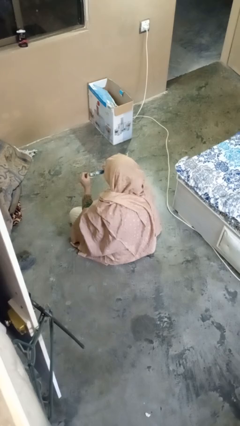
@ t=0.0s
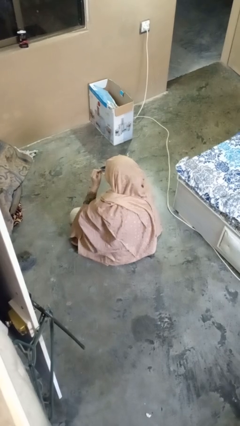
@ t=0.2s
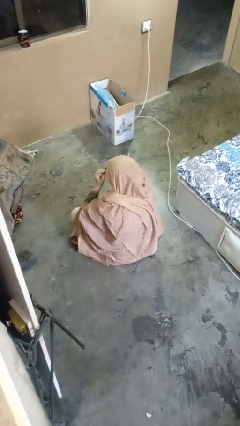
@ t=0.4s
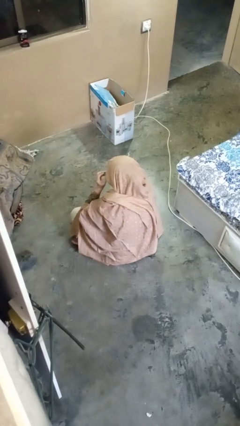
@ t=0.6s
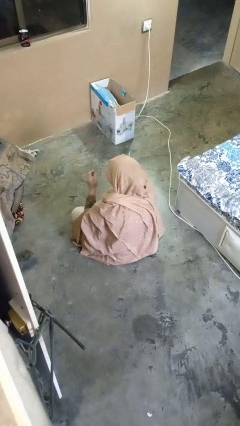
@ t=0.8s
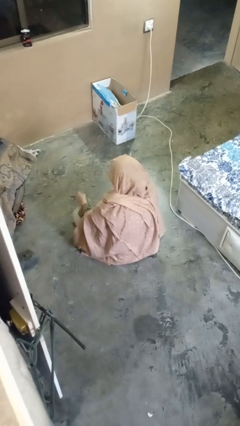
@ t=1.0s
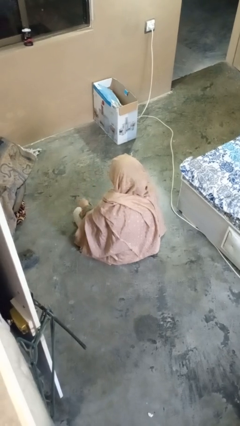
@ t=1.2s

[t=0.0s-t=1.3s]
person puts on glasses

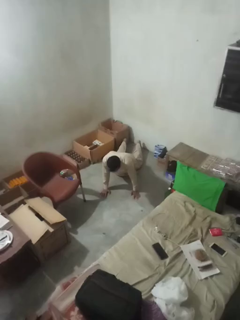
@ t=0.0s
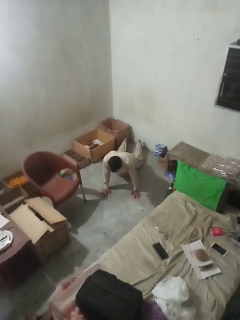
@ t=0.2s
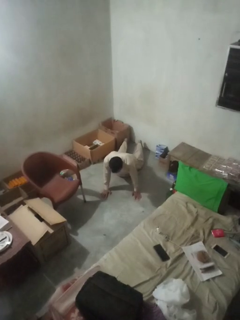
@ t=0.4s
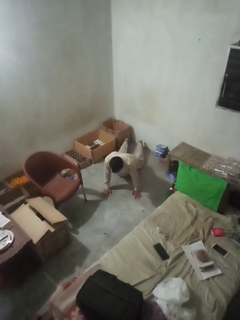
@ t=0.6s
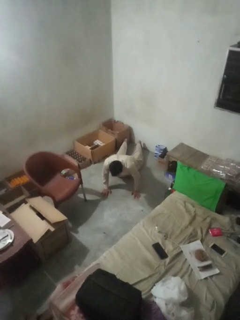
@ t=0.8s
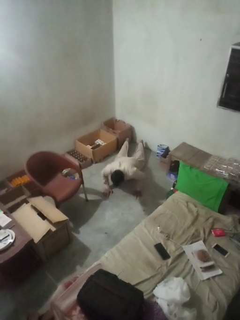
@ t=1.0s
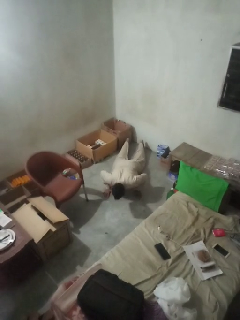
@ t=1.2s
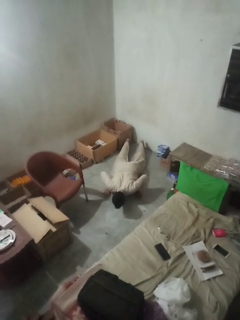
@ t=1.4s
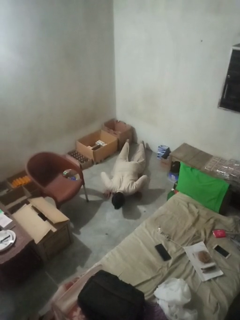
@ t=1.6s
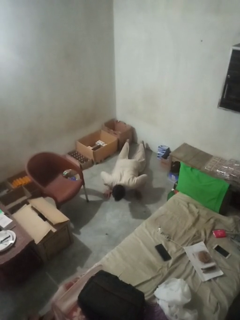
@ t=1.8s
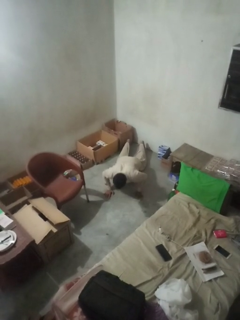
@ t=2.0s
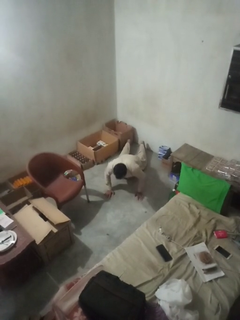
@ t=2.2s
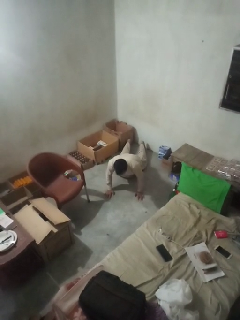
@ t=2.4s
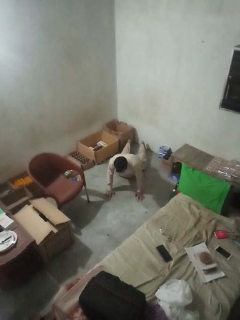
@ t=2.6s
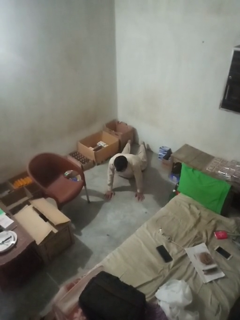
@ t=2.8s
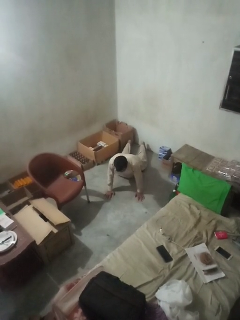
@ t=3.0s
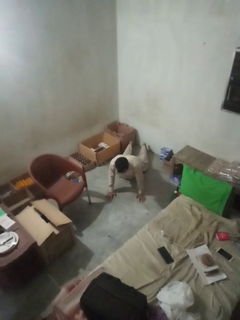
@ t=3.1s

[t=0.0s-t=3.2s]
person exercises with pushup

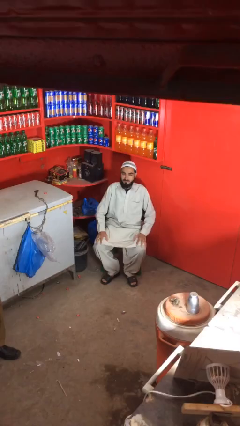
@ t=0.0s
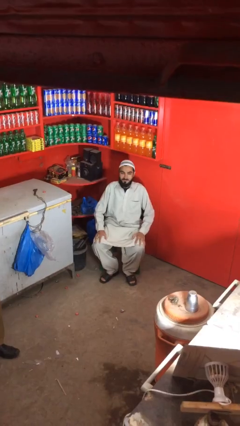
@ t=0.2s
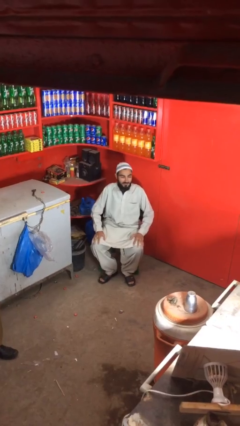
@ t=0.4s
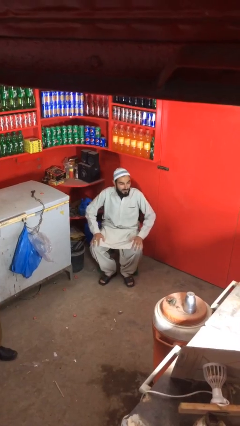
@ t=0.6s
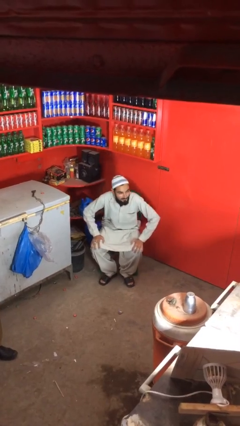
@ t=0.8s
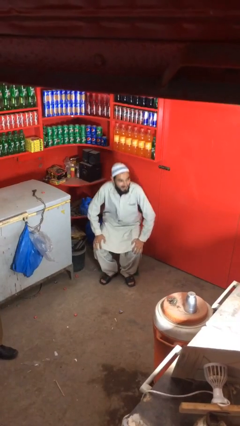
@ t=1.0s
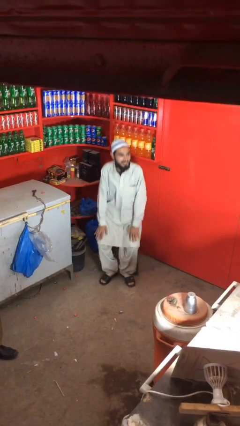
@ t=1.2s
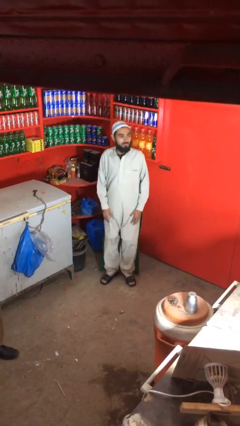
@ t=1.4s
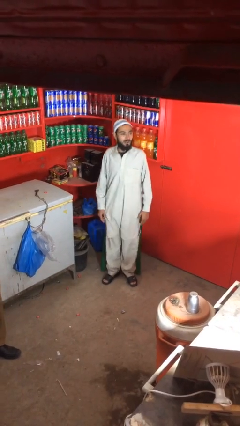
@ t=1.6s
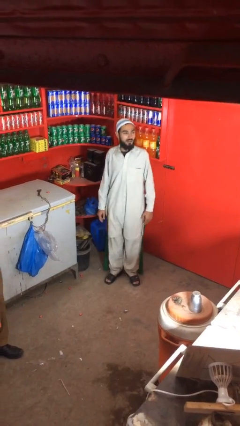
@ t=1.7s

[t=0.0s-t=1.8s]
person stands up

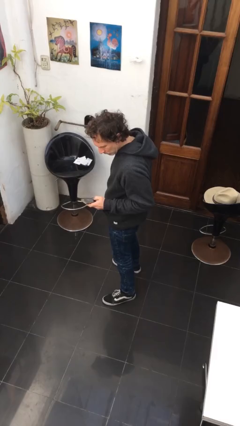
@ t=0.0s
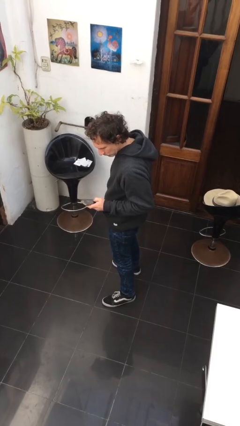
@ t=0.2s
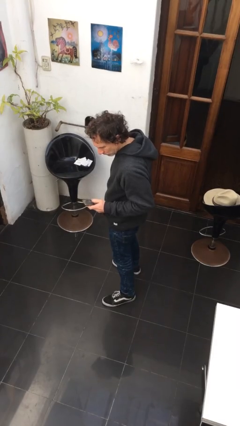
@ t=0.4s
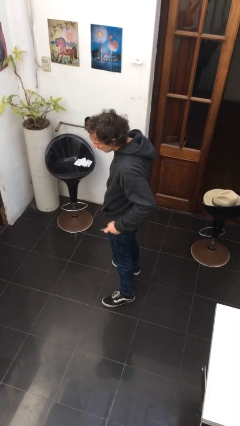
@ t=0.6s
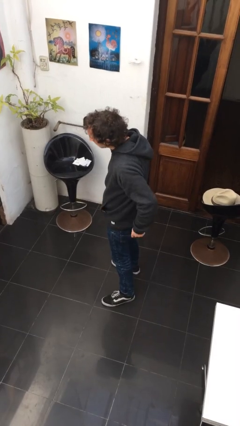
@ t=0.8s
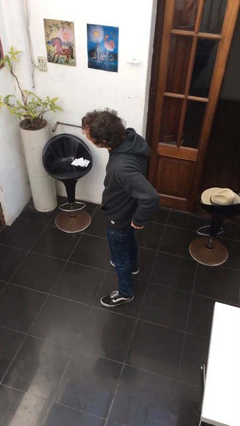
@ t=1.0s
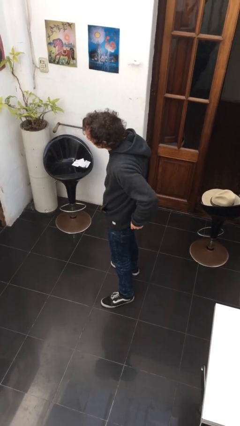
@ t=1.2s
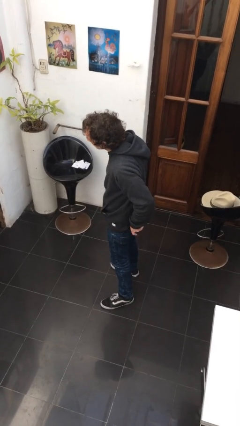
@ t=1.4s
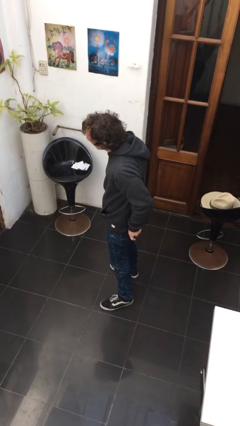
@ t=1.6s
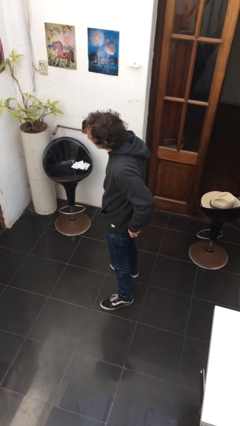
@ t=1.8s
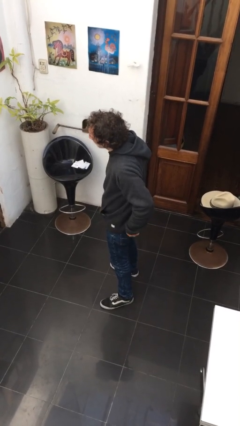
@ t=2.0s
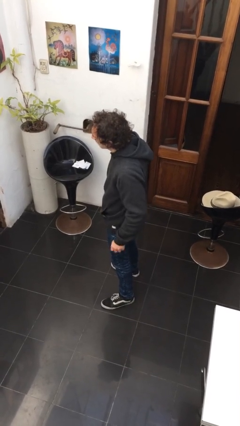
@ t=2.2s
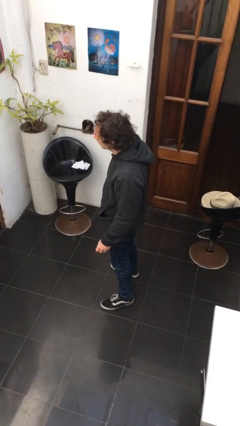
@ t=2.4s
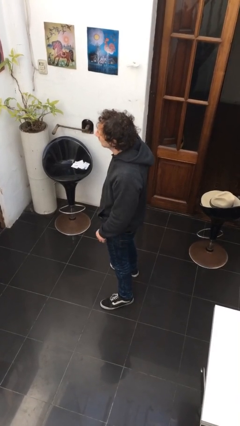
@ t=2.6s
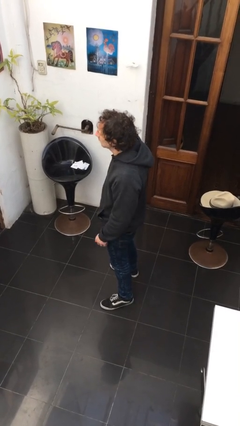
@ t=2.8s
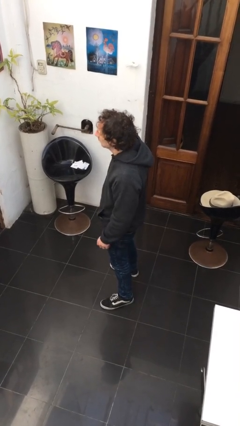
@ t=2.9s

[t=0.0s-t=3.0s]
person puts phone into pocket

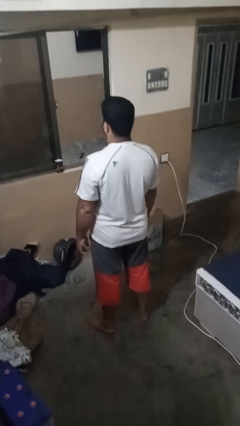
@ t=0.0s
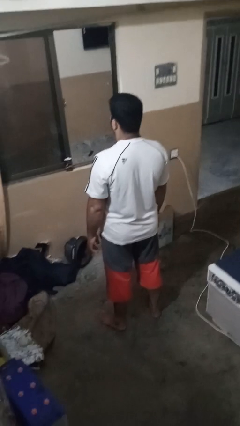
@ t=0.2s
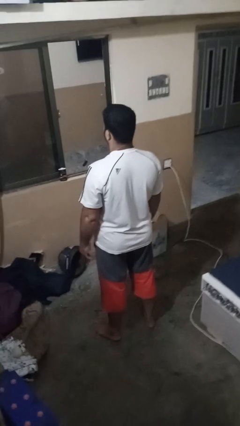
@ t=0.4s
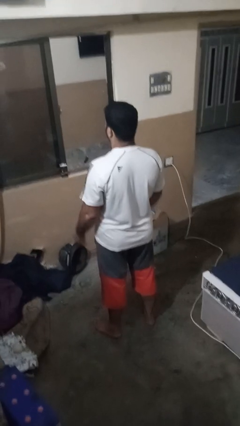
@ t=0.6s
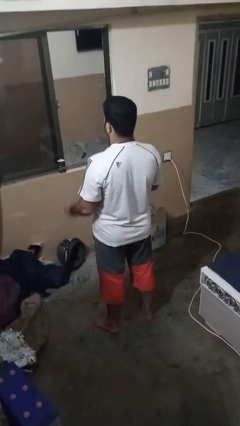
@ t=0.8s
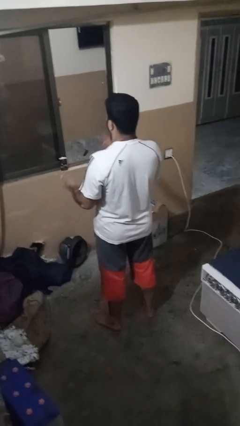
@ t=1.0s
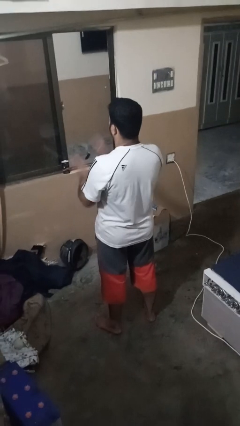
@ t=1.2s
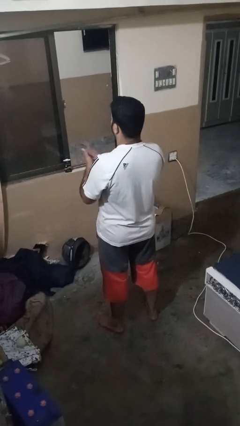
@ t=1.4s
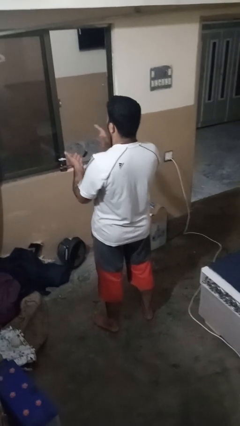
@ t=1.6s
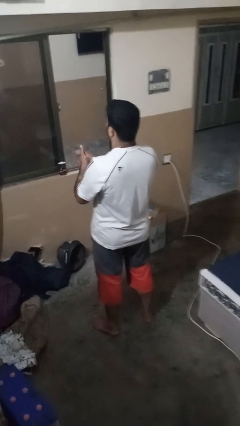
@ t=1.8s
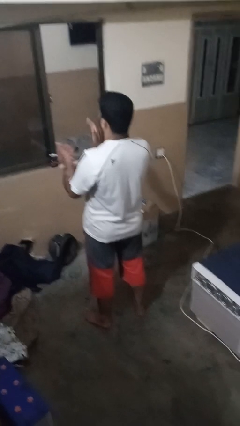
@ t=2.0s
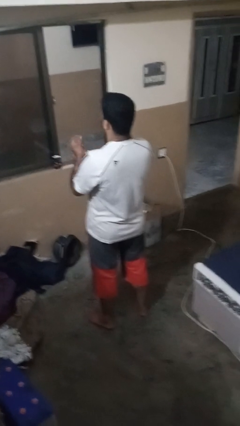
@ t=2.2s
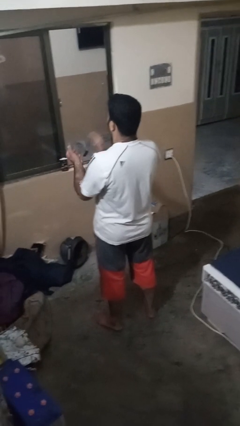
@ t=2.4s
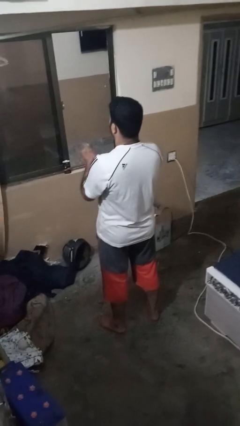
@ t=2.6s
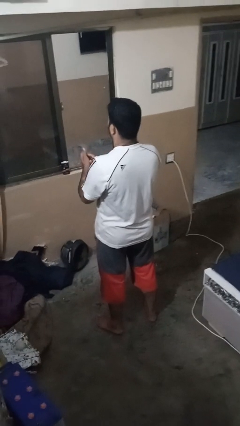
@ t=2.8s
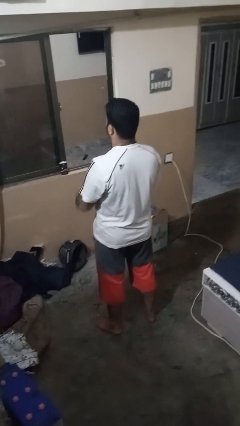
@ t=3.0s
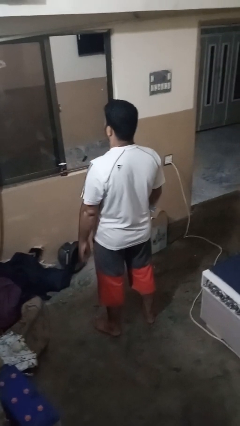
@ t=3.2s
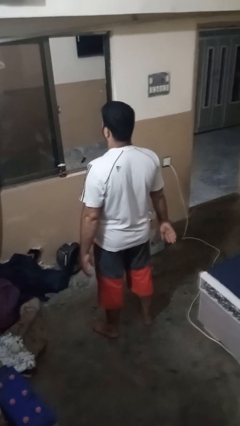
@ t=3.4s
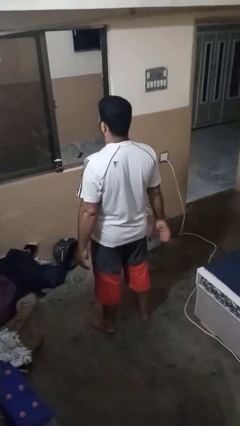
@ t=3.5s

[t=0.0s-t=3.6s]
person claps hands

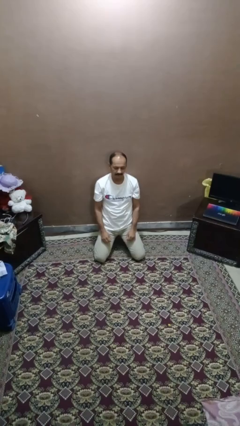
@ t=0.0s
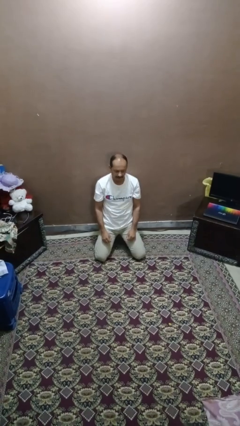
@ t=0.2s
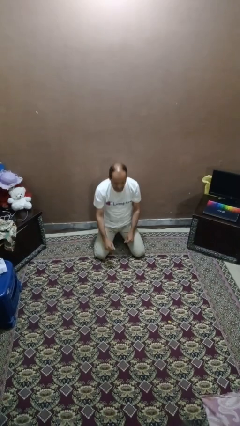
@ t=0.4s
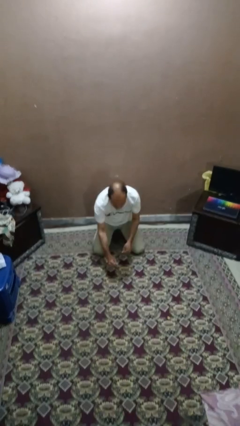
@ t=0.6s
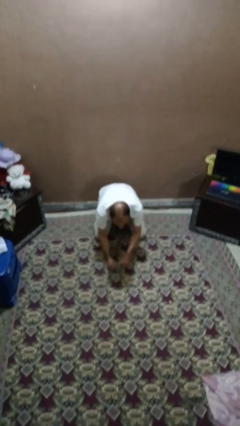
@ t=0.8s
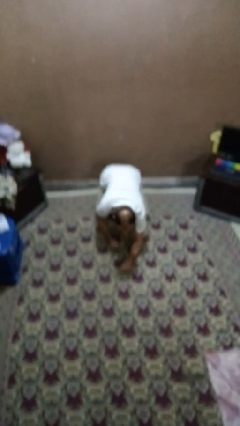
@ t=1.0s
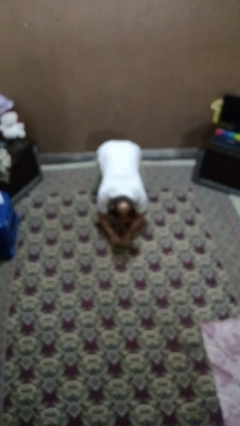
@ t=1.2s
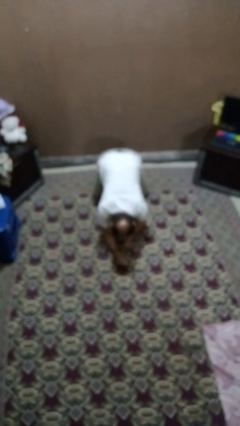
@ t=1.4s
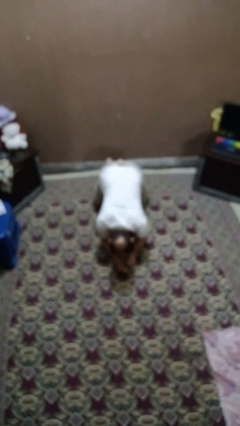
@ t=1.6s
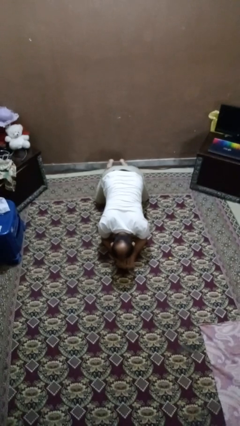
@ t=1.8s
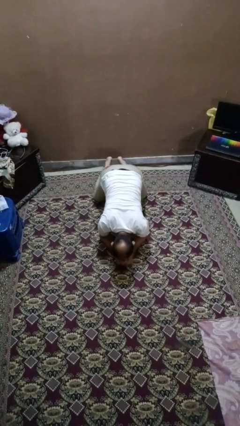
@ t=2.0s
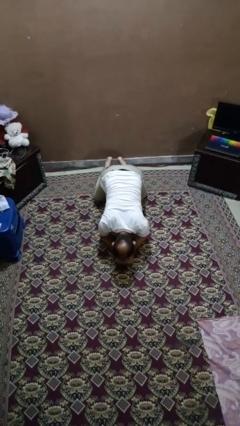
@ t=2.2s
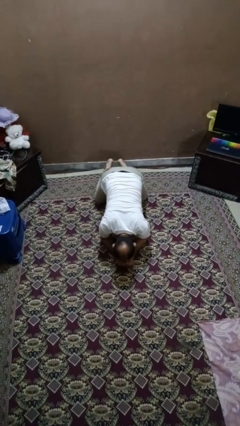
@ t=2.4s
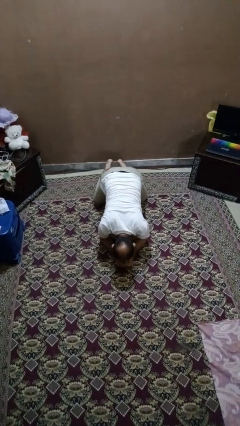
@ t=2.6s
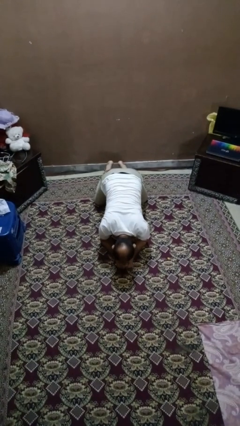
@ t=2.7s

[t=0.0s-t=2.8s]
person crawls

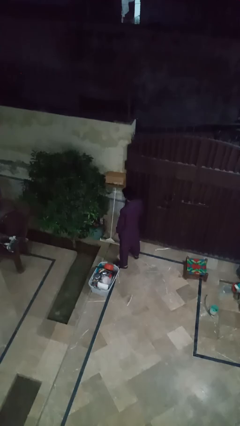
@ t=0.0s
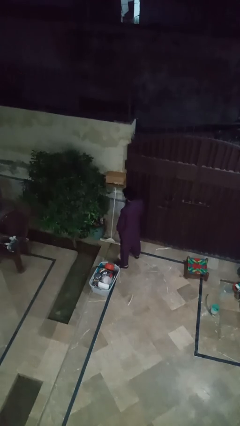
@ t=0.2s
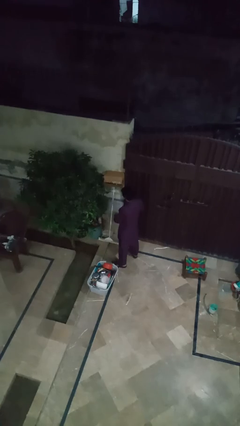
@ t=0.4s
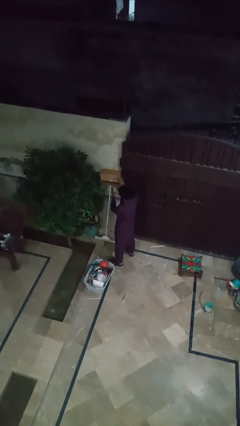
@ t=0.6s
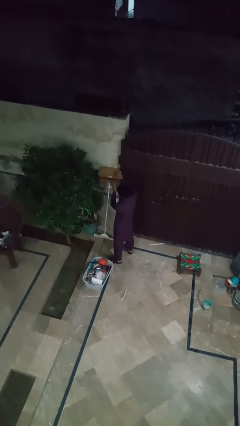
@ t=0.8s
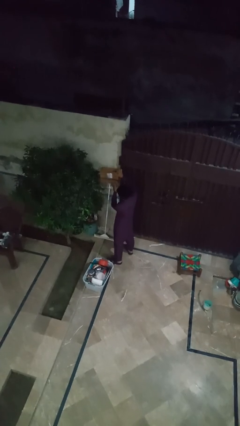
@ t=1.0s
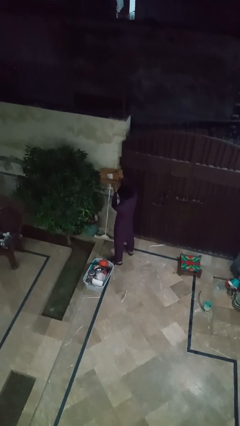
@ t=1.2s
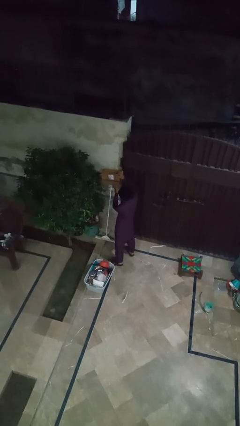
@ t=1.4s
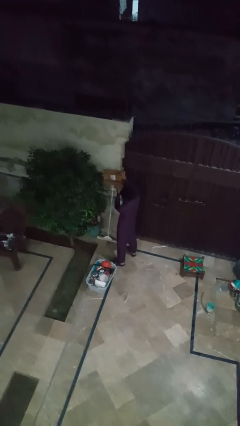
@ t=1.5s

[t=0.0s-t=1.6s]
person opens mailbox

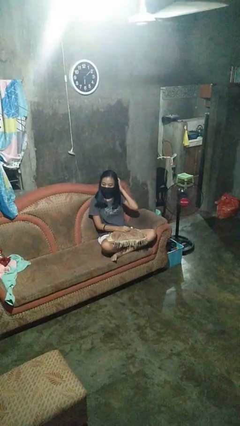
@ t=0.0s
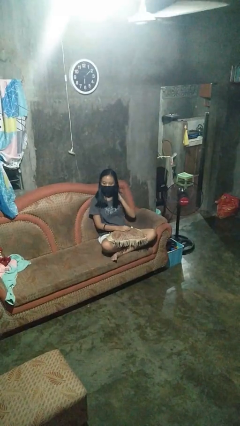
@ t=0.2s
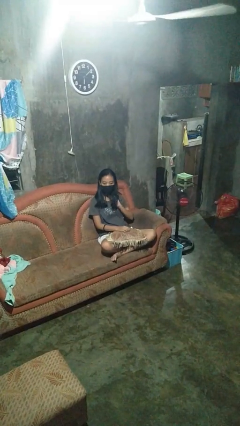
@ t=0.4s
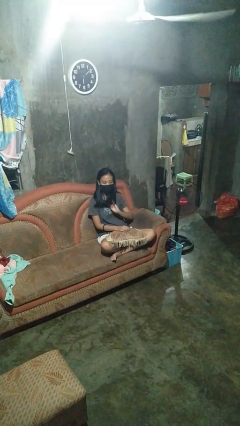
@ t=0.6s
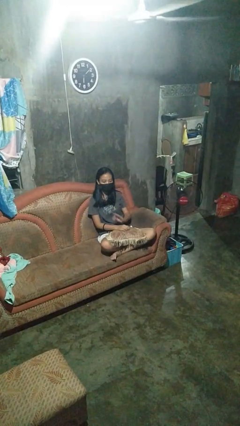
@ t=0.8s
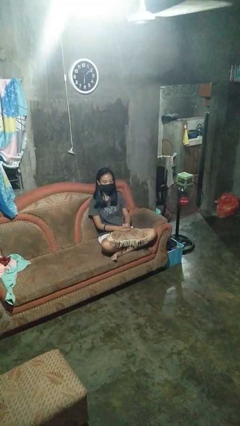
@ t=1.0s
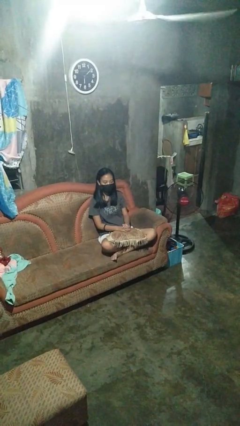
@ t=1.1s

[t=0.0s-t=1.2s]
person strokes hair
